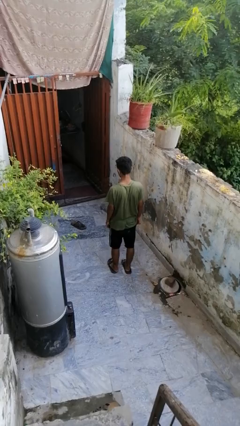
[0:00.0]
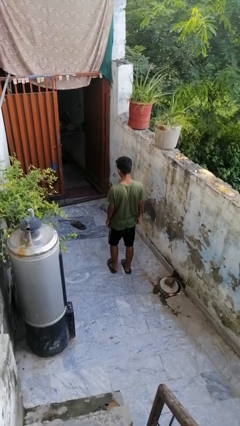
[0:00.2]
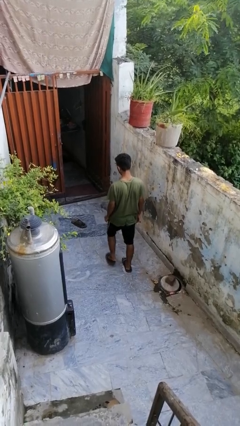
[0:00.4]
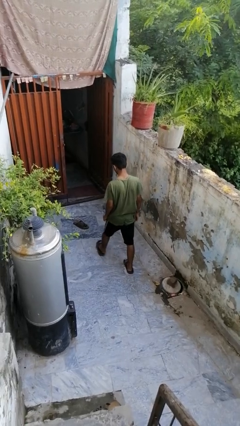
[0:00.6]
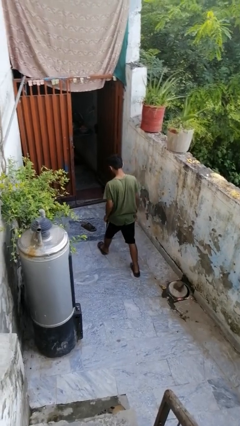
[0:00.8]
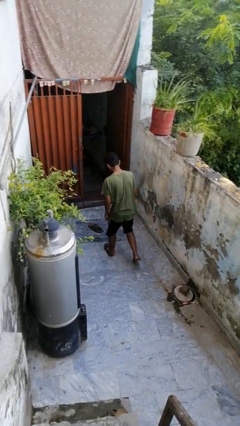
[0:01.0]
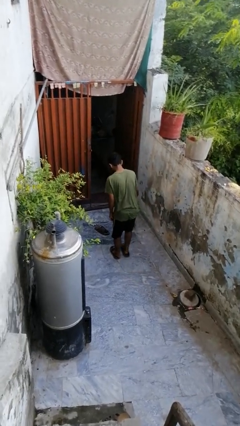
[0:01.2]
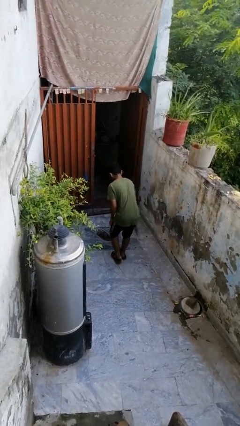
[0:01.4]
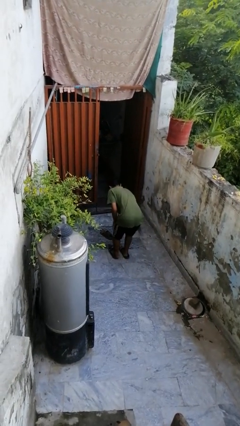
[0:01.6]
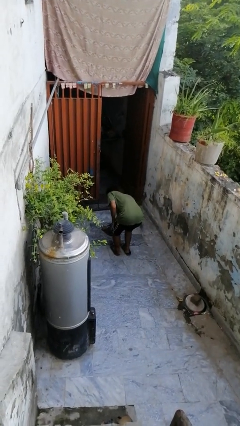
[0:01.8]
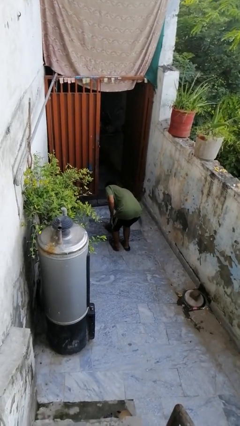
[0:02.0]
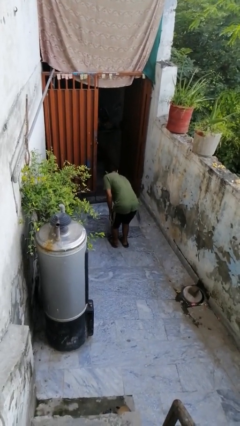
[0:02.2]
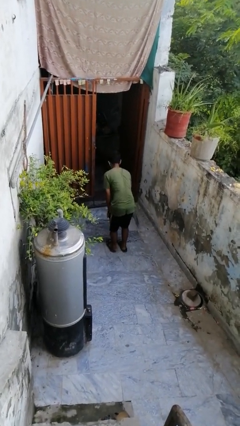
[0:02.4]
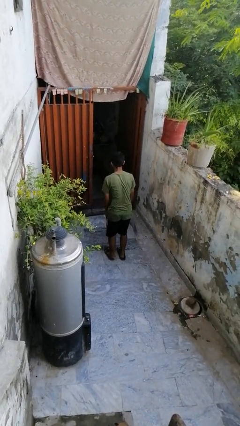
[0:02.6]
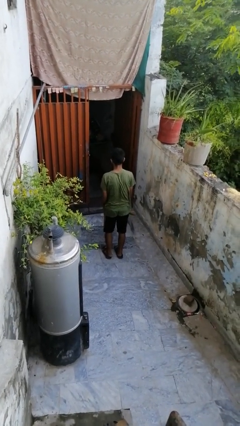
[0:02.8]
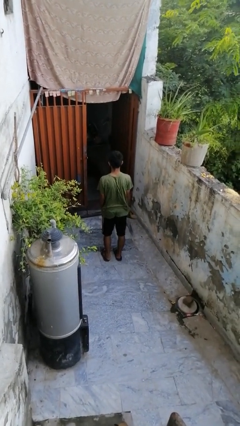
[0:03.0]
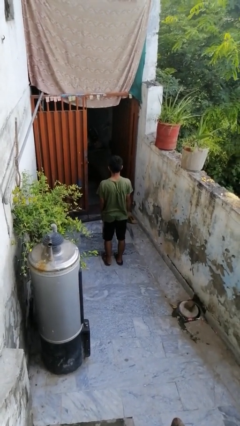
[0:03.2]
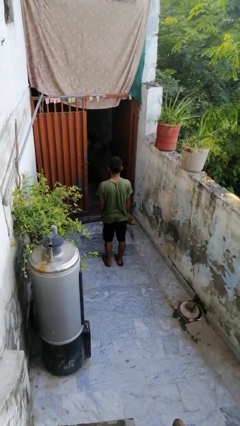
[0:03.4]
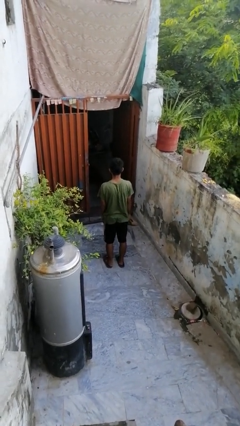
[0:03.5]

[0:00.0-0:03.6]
person picks up object from floor

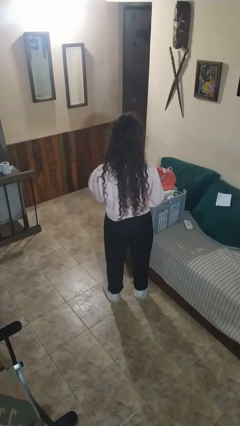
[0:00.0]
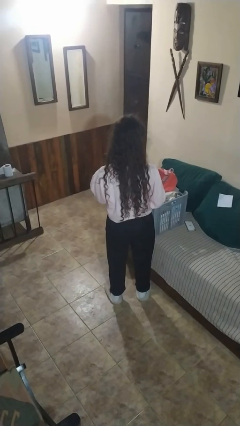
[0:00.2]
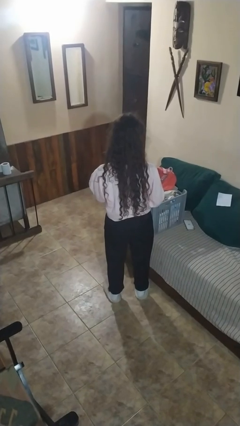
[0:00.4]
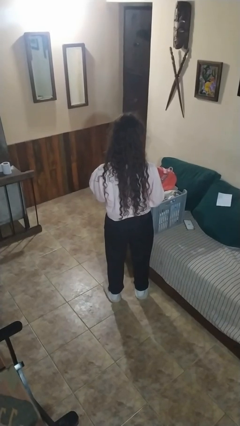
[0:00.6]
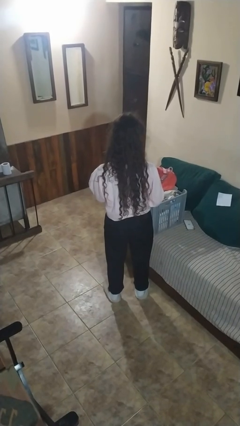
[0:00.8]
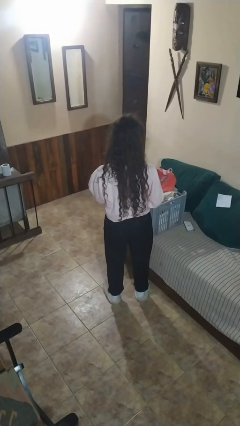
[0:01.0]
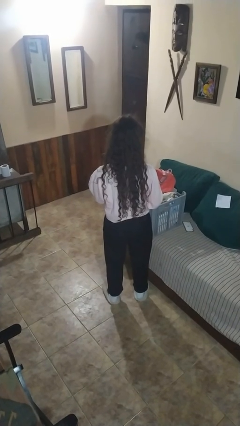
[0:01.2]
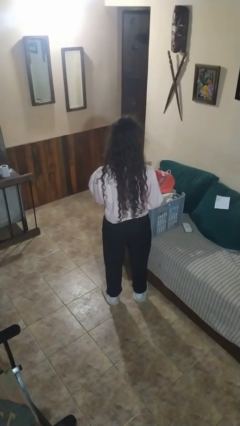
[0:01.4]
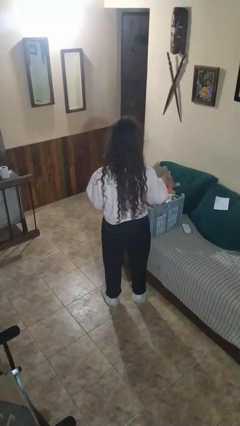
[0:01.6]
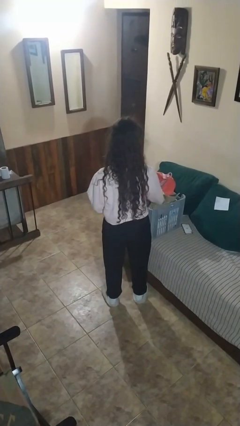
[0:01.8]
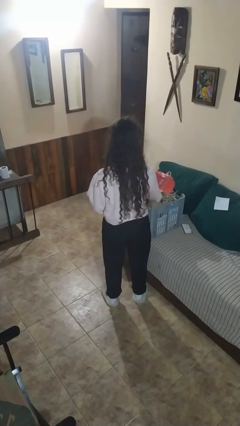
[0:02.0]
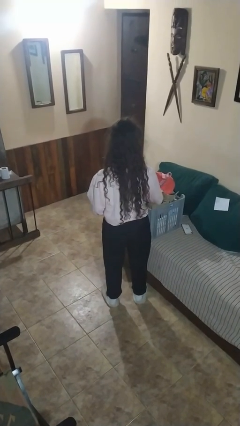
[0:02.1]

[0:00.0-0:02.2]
person puts object into basket

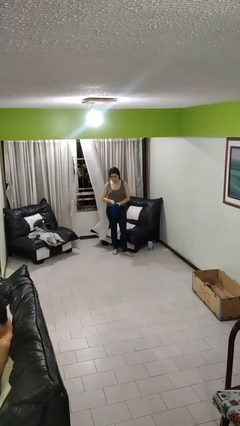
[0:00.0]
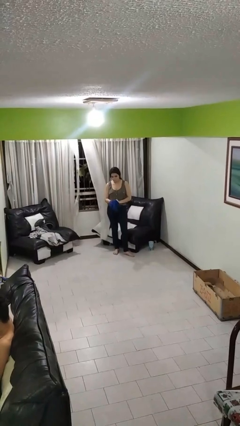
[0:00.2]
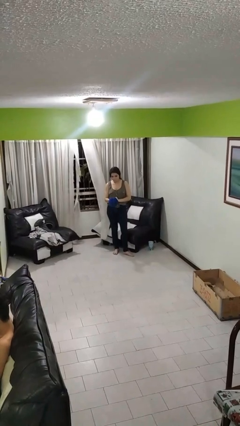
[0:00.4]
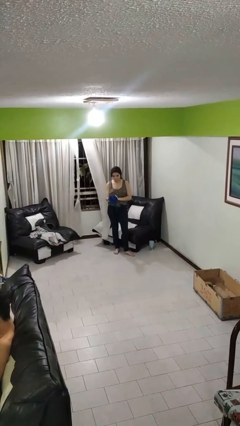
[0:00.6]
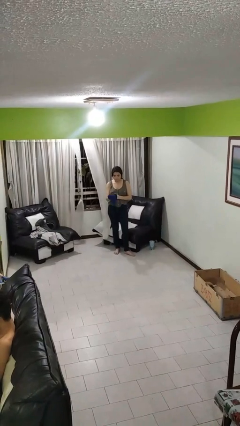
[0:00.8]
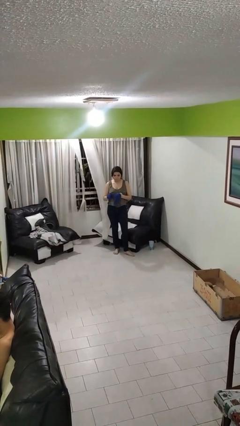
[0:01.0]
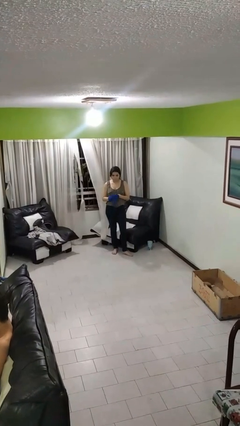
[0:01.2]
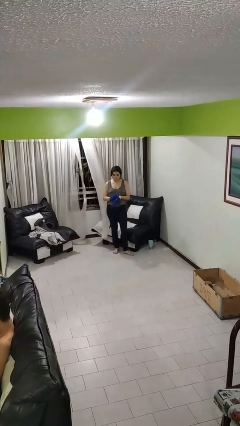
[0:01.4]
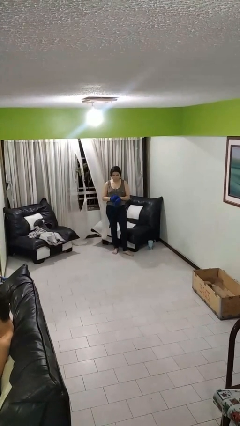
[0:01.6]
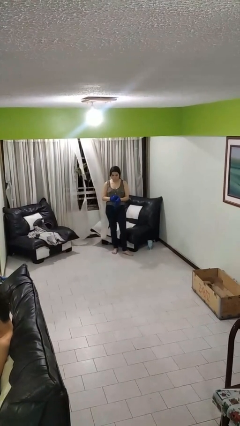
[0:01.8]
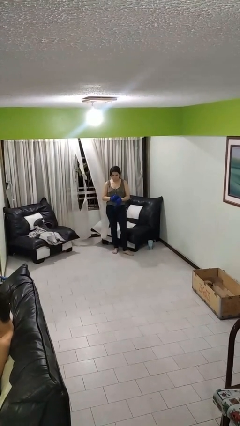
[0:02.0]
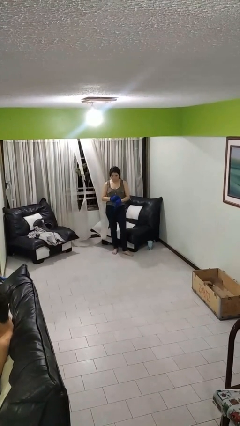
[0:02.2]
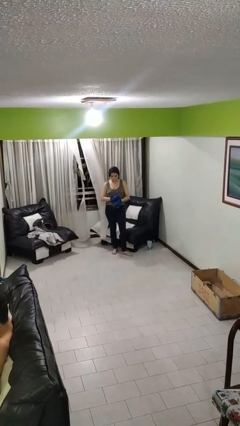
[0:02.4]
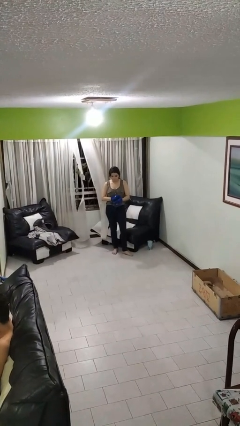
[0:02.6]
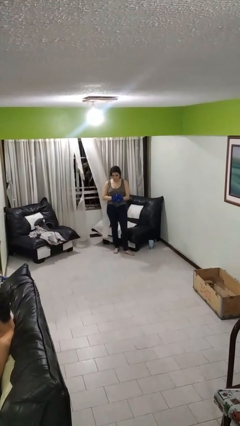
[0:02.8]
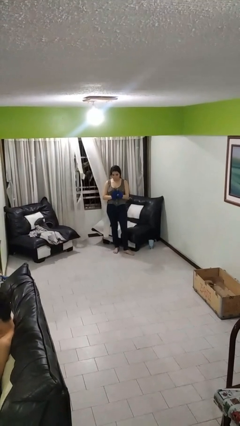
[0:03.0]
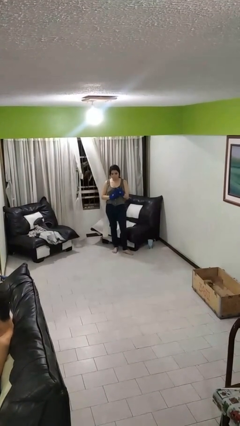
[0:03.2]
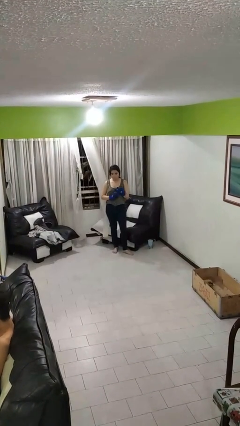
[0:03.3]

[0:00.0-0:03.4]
person puts on gloves

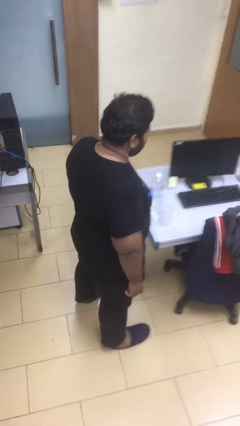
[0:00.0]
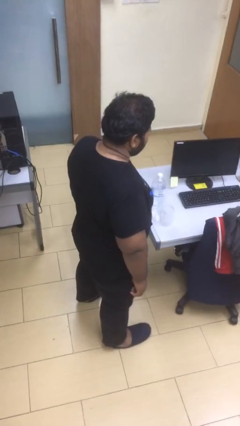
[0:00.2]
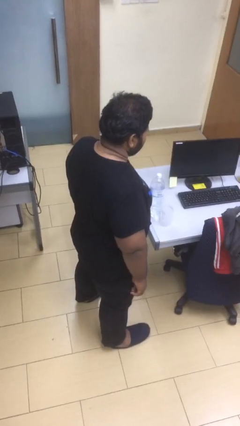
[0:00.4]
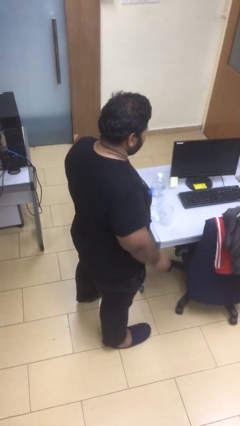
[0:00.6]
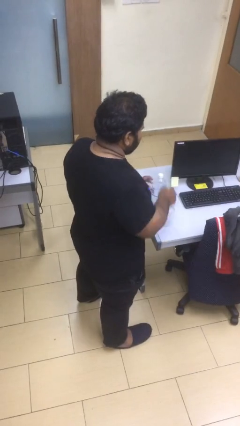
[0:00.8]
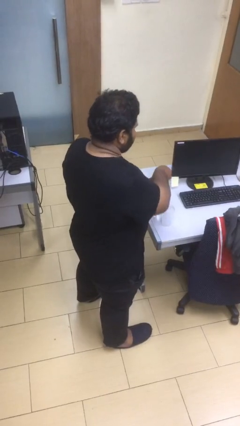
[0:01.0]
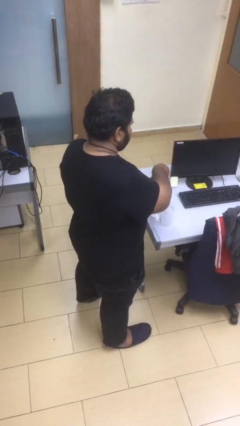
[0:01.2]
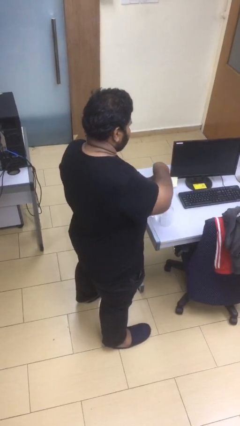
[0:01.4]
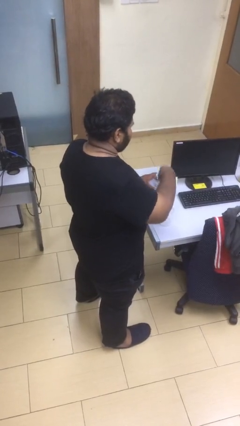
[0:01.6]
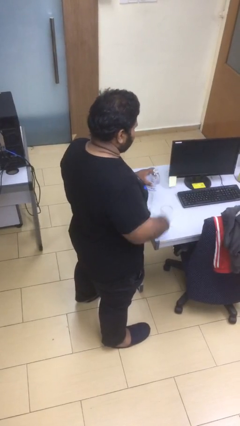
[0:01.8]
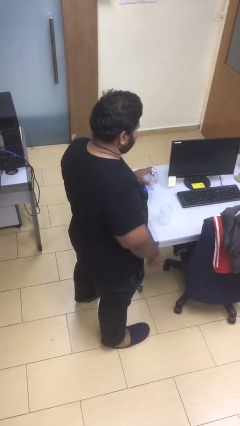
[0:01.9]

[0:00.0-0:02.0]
person unscrews lid from bottle

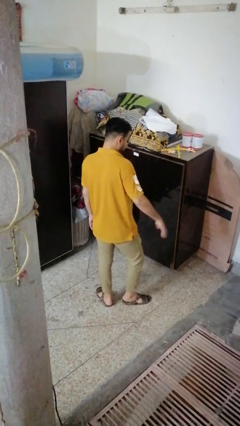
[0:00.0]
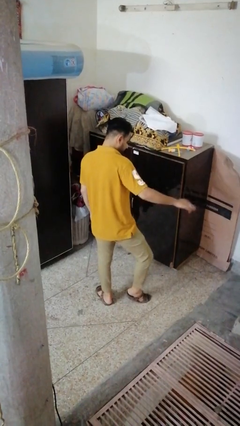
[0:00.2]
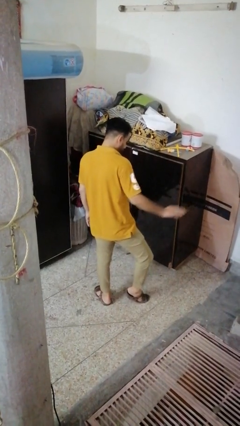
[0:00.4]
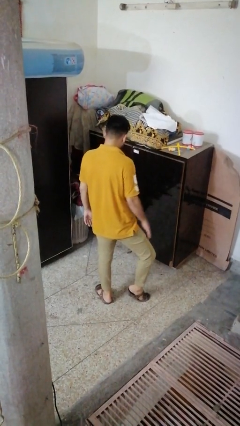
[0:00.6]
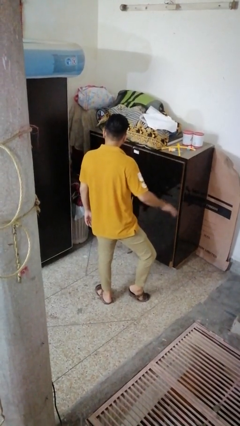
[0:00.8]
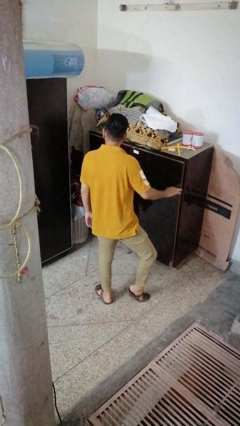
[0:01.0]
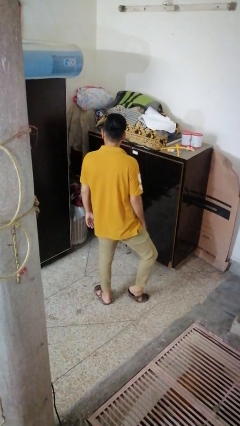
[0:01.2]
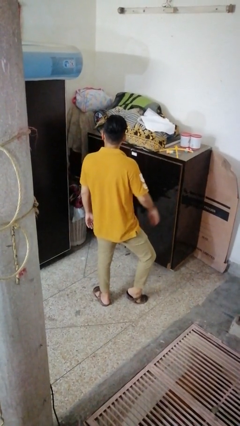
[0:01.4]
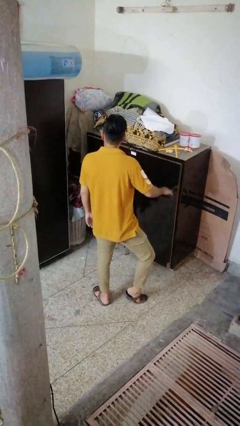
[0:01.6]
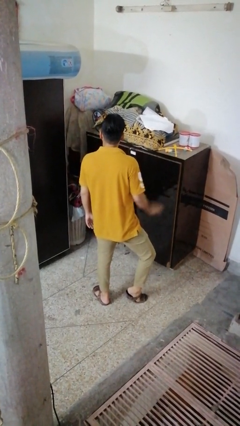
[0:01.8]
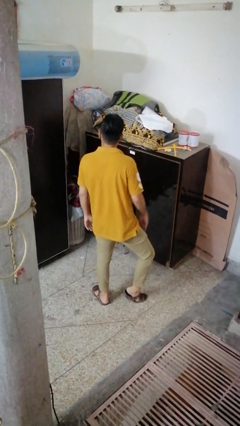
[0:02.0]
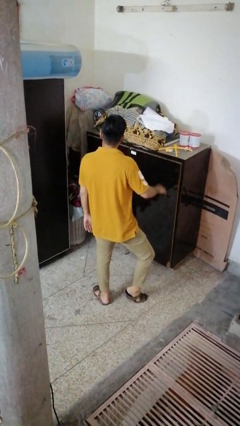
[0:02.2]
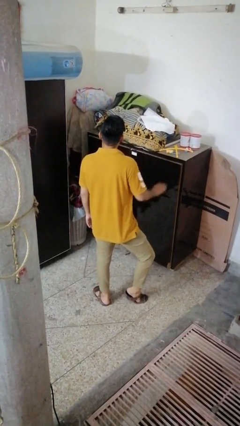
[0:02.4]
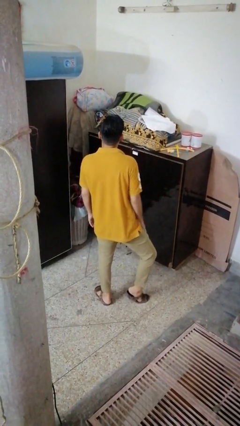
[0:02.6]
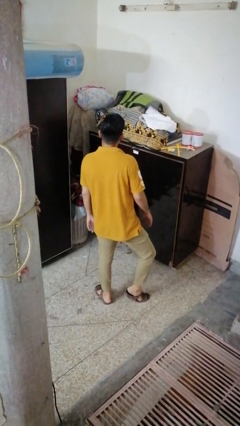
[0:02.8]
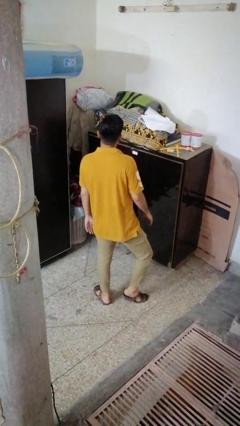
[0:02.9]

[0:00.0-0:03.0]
person slaps hands on thighs

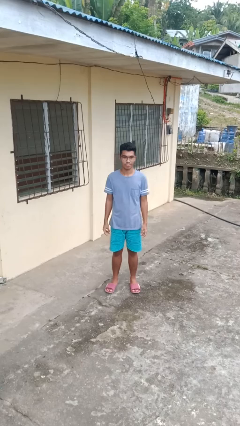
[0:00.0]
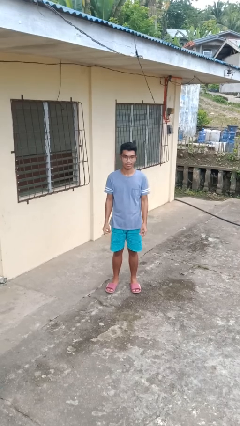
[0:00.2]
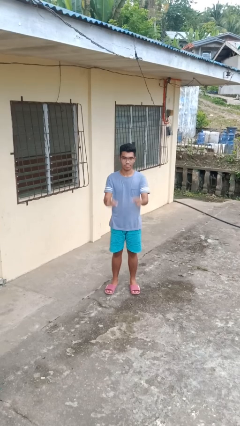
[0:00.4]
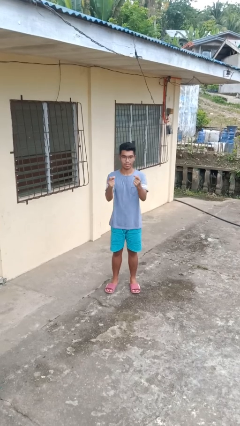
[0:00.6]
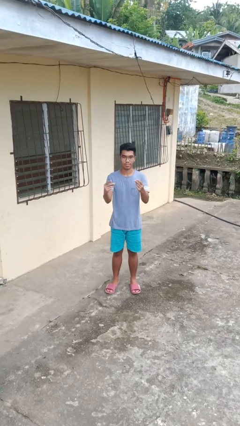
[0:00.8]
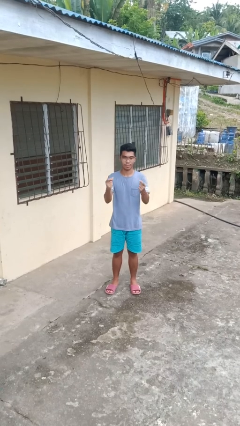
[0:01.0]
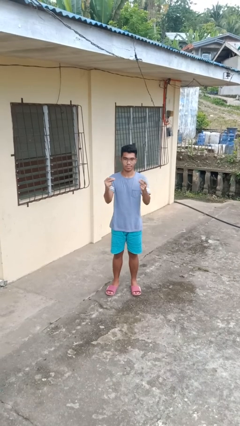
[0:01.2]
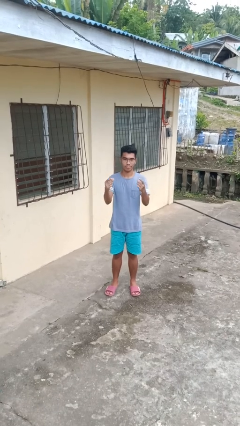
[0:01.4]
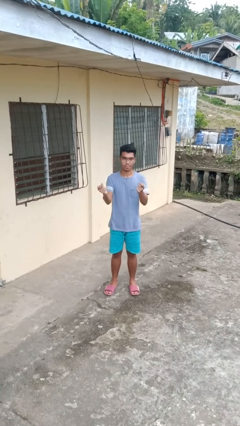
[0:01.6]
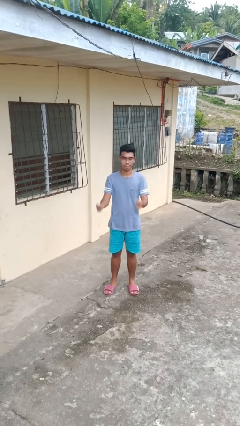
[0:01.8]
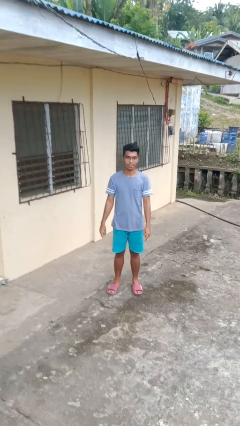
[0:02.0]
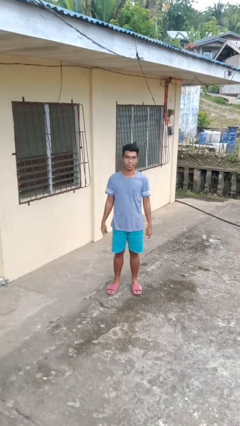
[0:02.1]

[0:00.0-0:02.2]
person snaps fingers

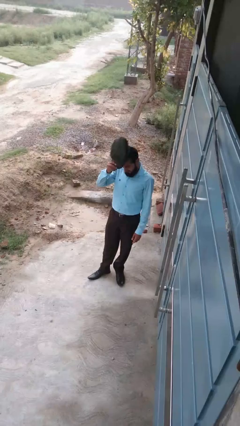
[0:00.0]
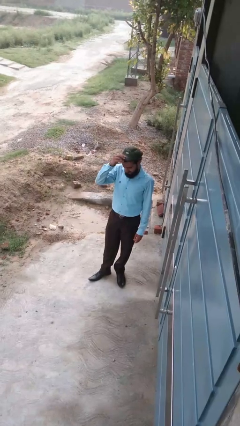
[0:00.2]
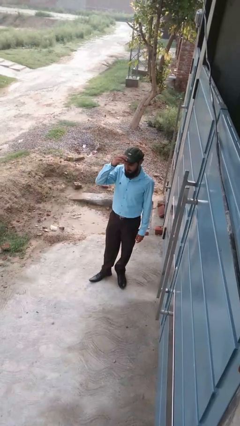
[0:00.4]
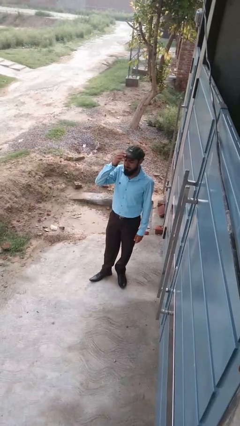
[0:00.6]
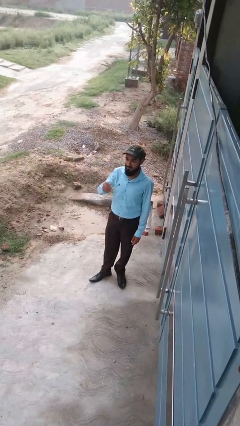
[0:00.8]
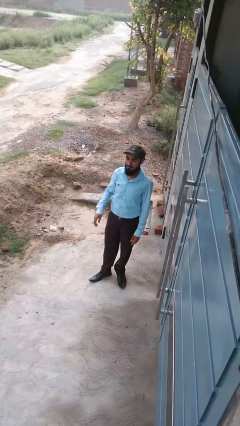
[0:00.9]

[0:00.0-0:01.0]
person puts on hat
